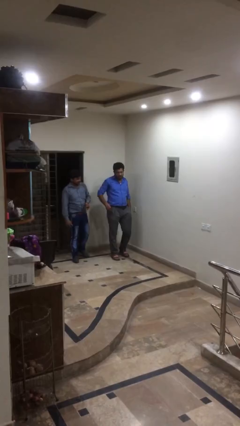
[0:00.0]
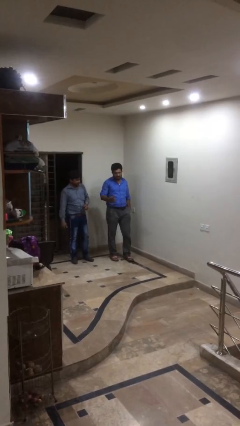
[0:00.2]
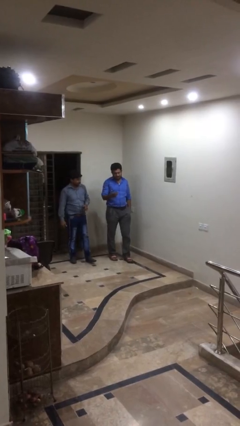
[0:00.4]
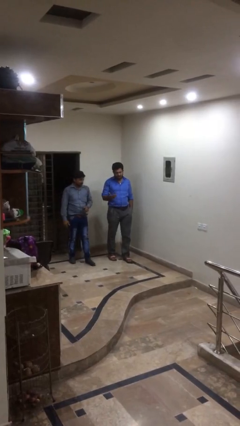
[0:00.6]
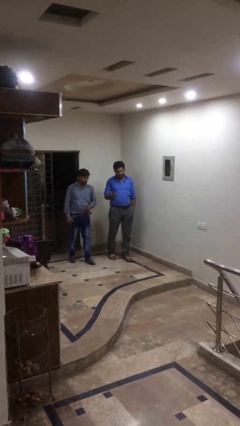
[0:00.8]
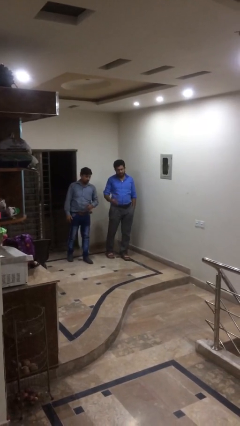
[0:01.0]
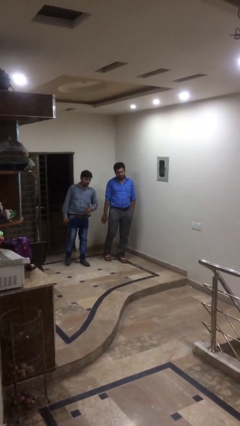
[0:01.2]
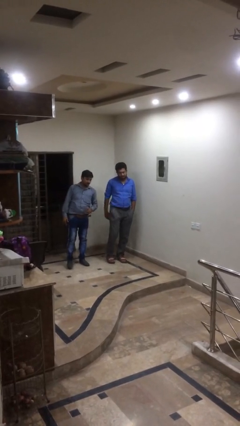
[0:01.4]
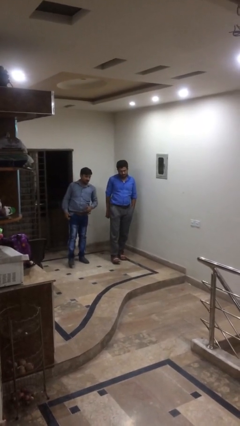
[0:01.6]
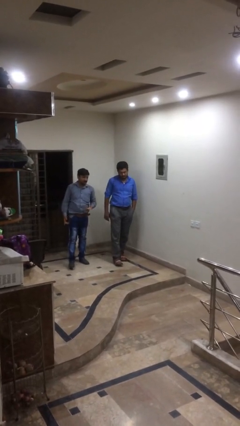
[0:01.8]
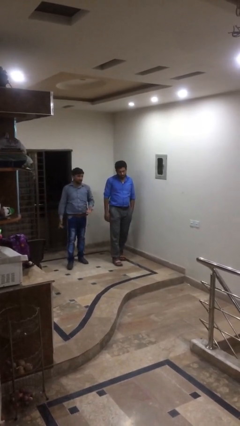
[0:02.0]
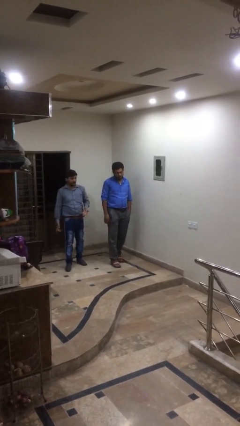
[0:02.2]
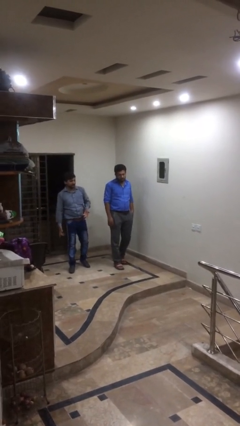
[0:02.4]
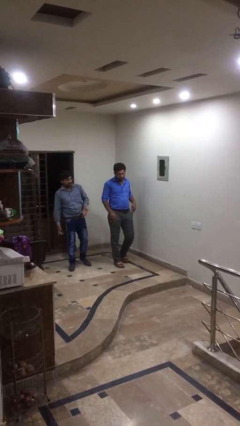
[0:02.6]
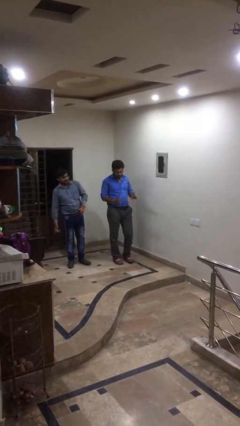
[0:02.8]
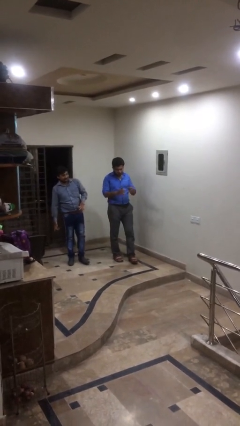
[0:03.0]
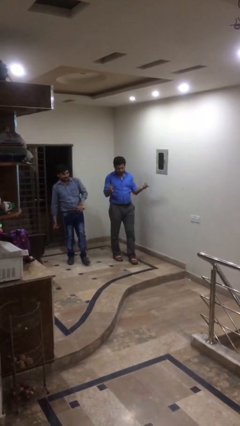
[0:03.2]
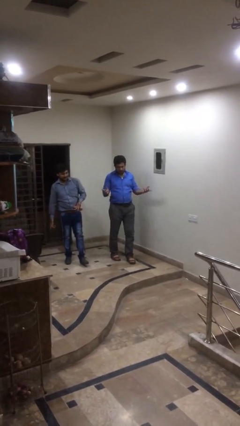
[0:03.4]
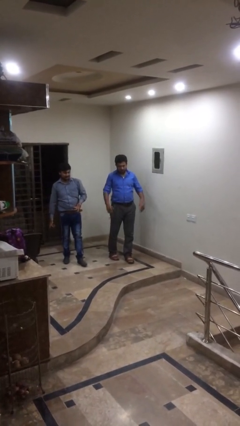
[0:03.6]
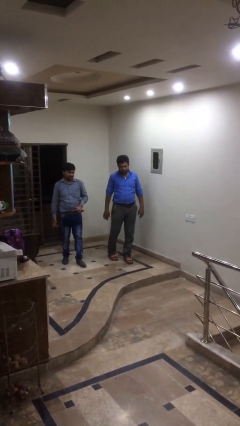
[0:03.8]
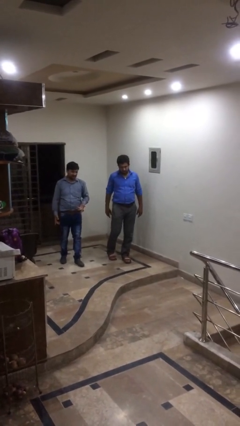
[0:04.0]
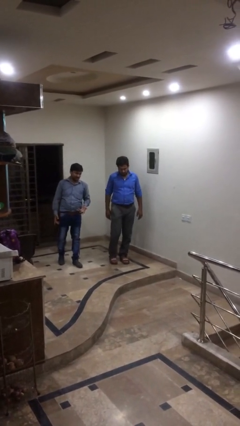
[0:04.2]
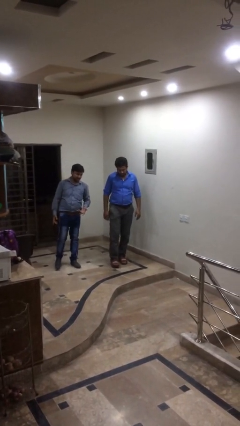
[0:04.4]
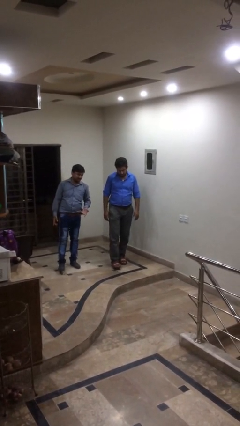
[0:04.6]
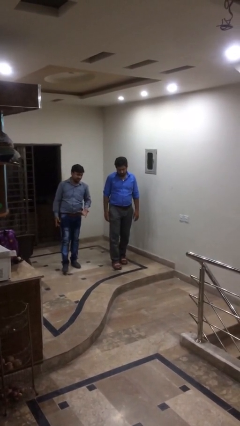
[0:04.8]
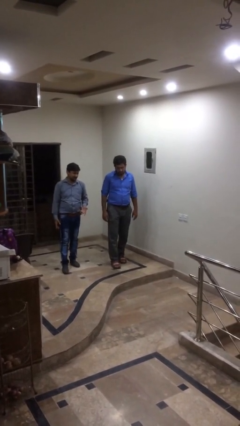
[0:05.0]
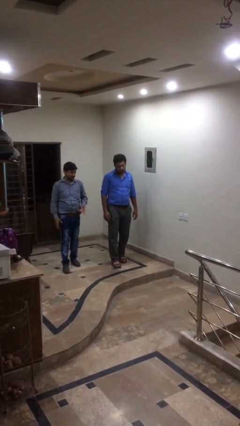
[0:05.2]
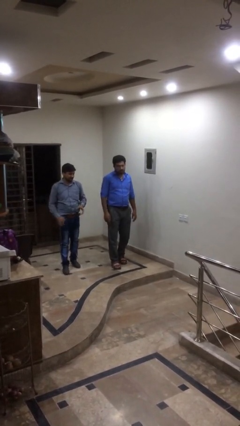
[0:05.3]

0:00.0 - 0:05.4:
person talks to person

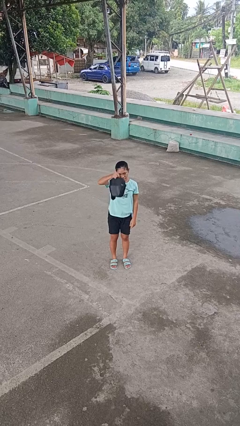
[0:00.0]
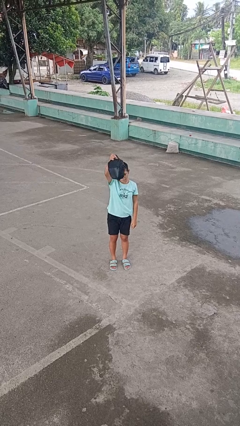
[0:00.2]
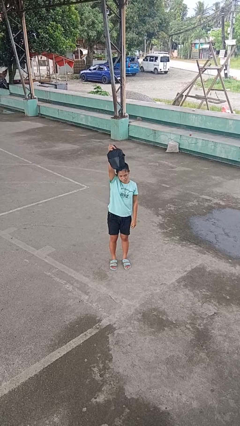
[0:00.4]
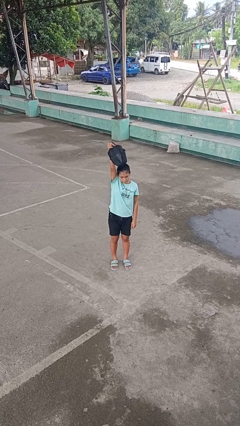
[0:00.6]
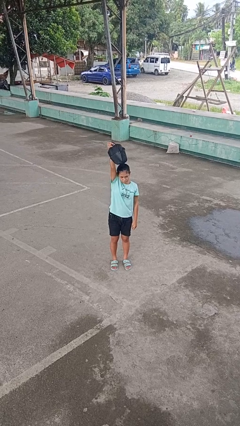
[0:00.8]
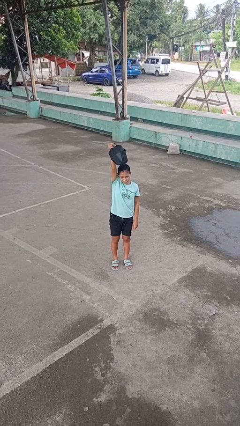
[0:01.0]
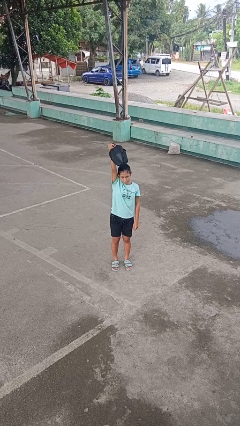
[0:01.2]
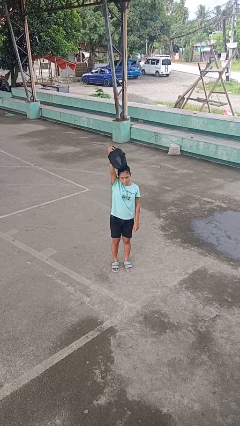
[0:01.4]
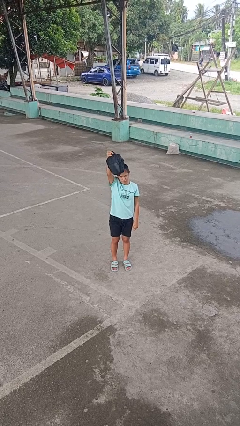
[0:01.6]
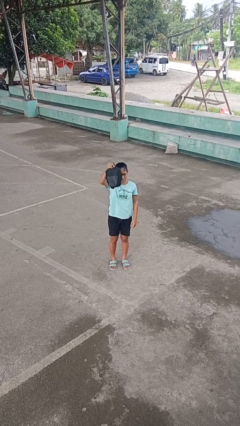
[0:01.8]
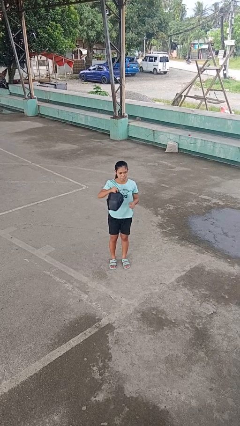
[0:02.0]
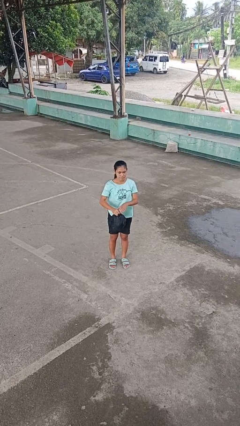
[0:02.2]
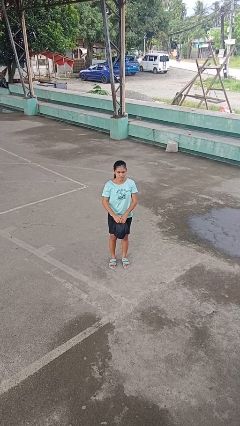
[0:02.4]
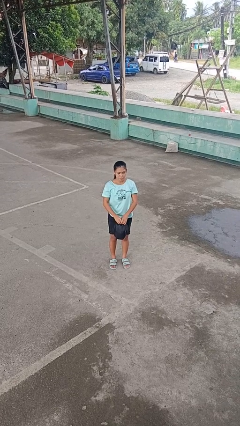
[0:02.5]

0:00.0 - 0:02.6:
person holds object above head

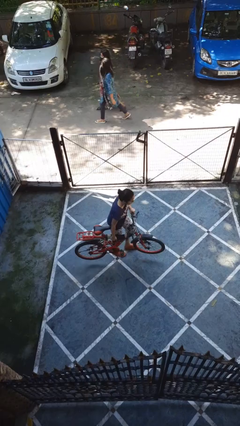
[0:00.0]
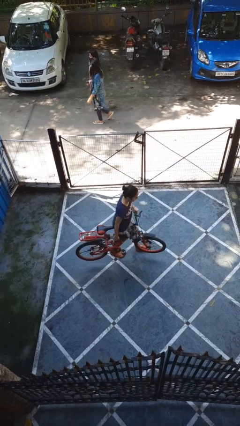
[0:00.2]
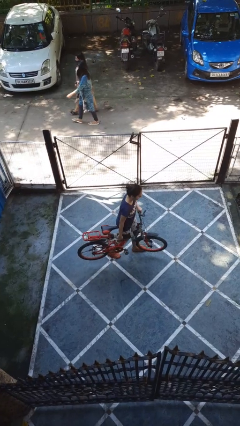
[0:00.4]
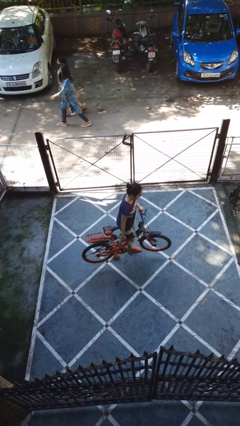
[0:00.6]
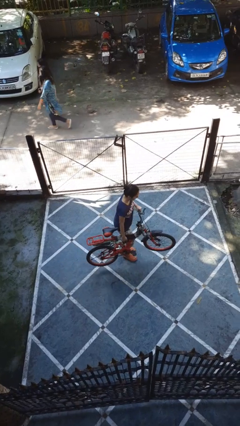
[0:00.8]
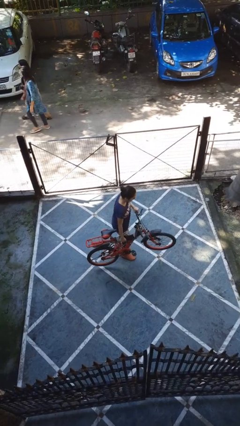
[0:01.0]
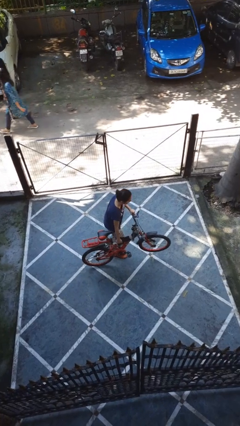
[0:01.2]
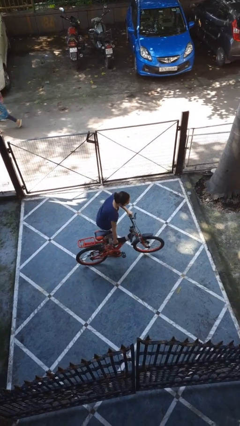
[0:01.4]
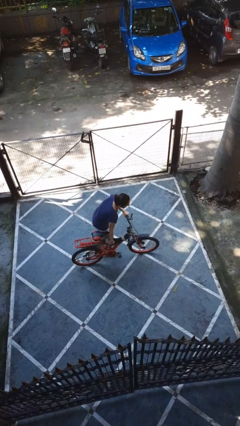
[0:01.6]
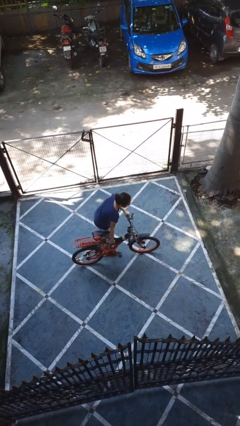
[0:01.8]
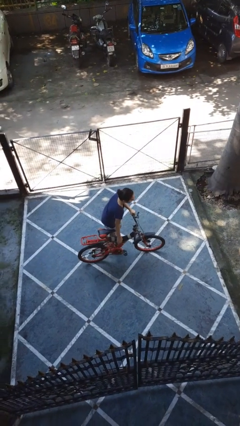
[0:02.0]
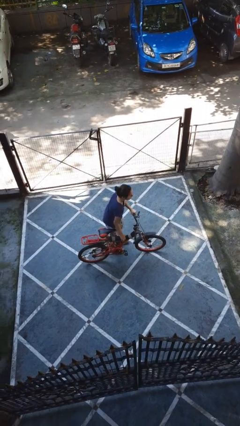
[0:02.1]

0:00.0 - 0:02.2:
person carries bicycle

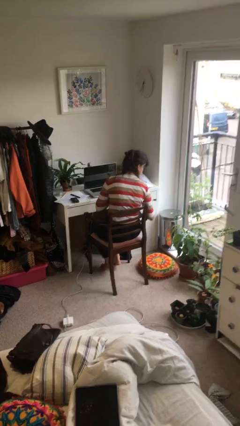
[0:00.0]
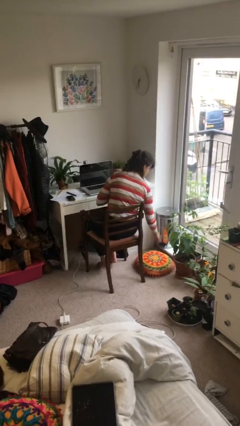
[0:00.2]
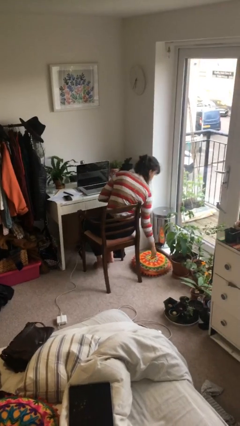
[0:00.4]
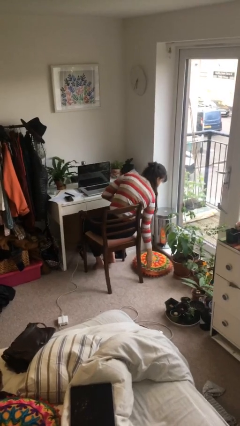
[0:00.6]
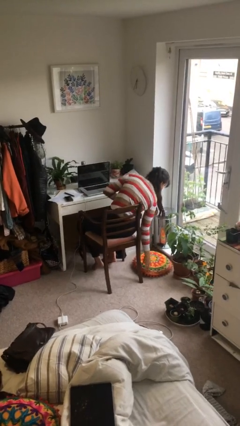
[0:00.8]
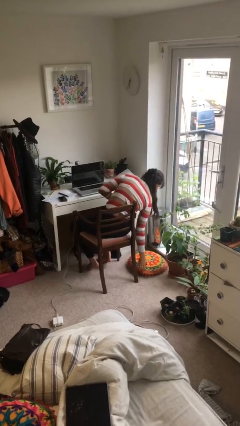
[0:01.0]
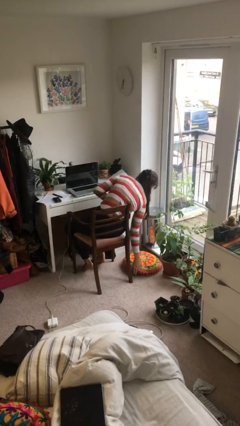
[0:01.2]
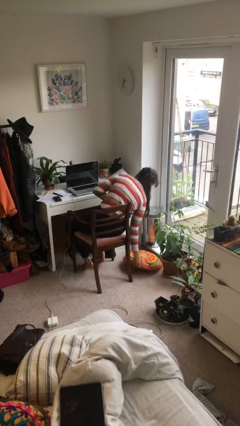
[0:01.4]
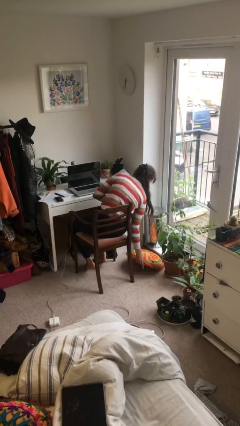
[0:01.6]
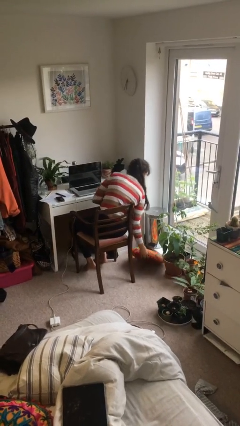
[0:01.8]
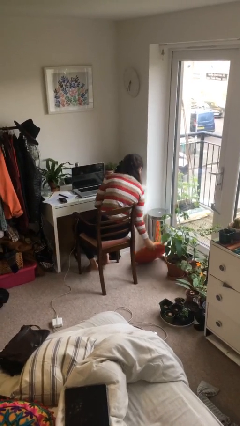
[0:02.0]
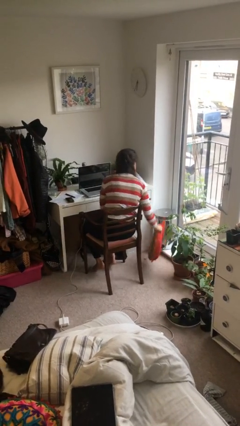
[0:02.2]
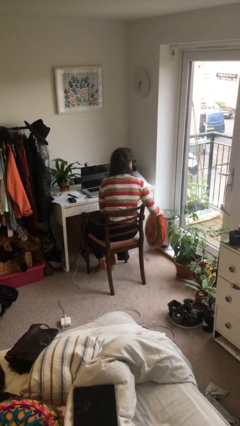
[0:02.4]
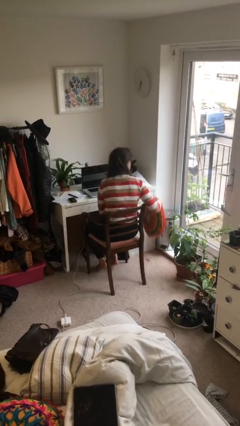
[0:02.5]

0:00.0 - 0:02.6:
person picks up object from floor

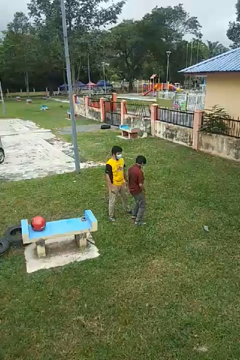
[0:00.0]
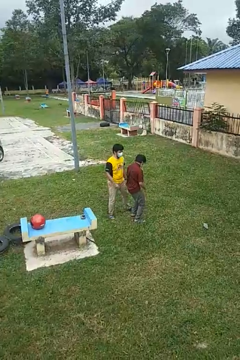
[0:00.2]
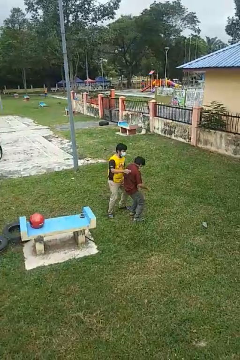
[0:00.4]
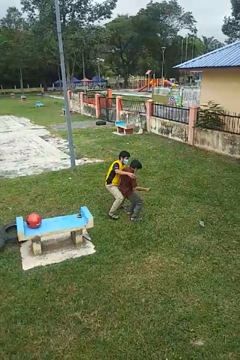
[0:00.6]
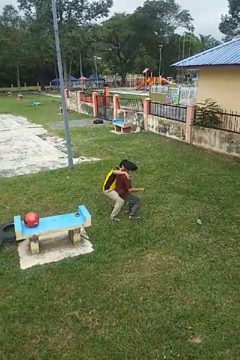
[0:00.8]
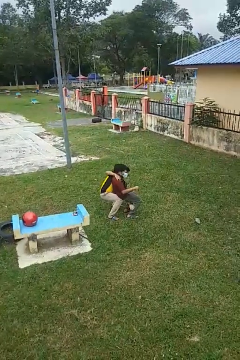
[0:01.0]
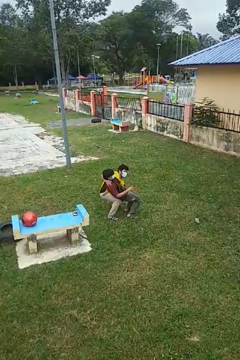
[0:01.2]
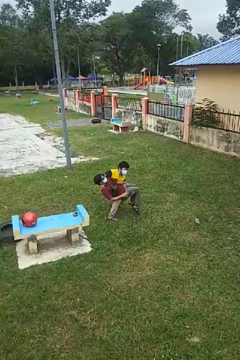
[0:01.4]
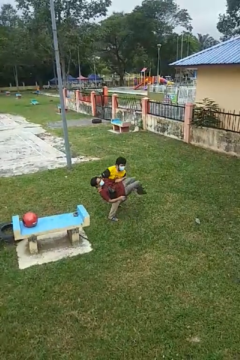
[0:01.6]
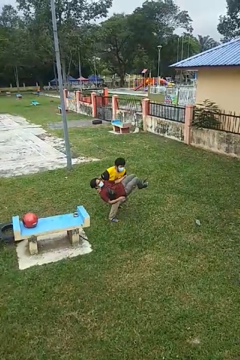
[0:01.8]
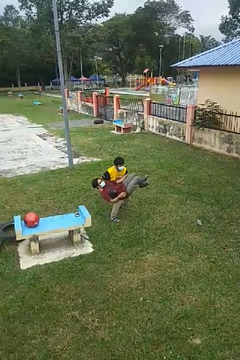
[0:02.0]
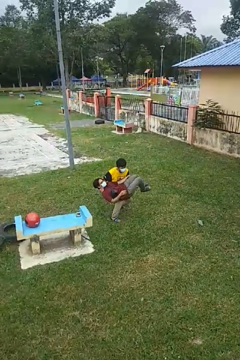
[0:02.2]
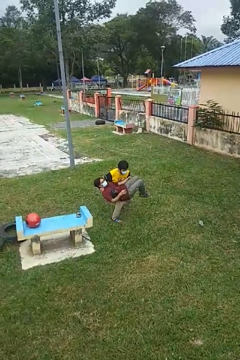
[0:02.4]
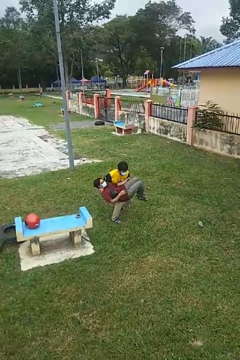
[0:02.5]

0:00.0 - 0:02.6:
person picks up person

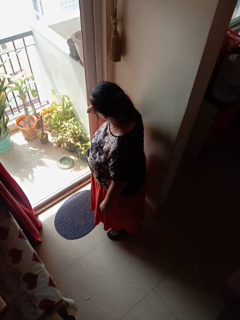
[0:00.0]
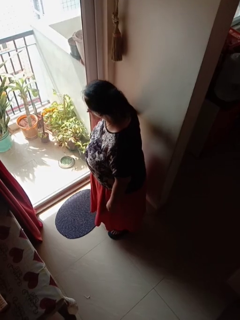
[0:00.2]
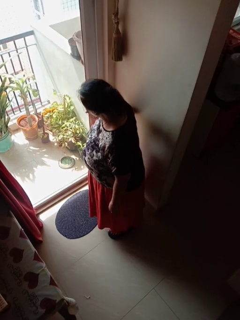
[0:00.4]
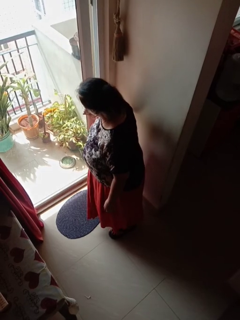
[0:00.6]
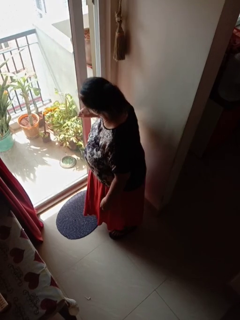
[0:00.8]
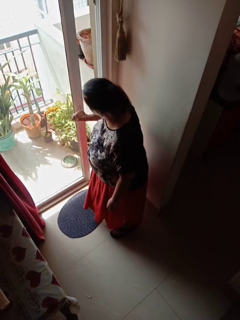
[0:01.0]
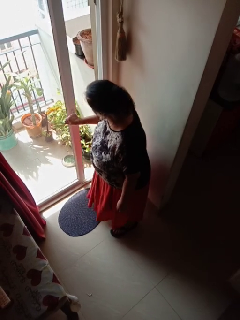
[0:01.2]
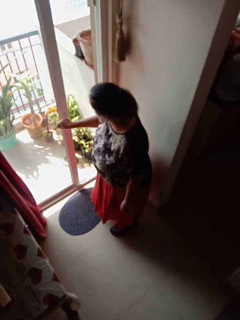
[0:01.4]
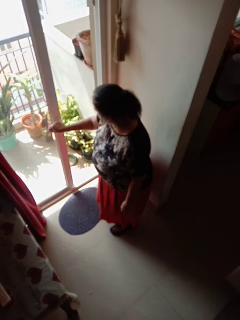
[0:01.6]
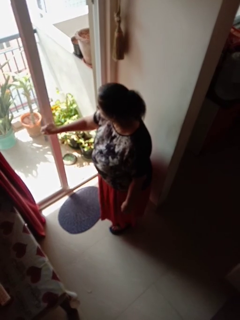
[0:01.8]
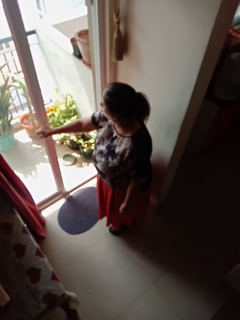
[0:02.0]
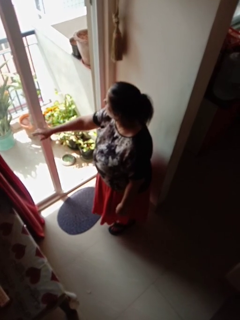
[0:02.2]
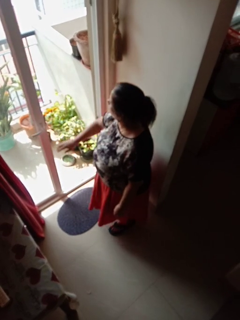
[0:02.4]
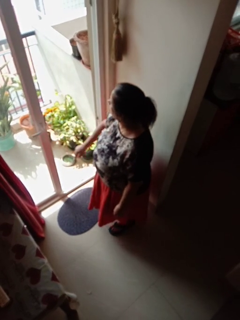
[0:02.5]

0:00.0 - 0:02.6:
person opens sliding door

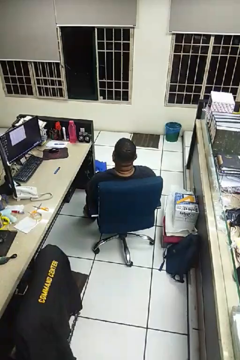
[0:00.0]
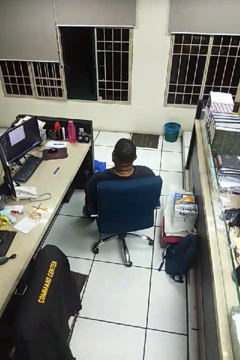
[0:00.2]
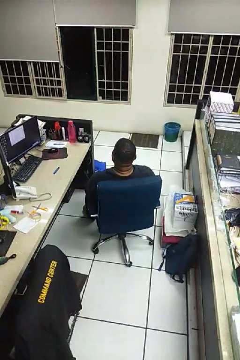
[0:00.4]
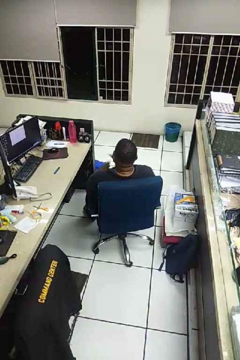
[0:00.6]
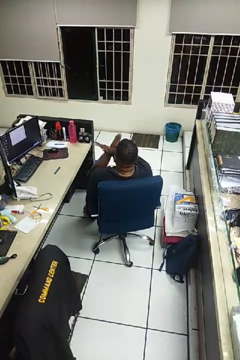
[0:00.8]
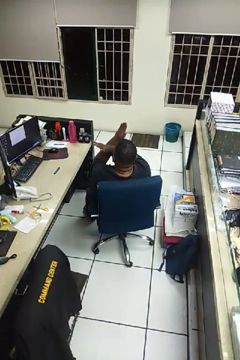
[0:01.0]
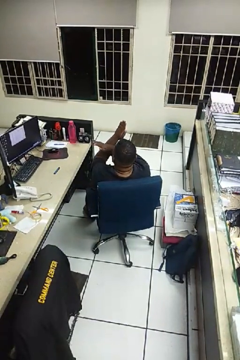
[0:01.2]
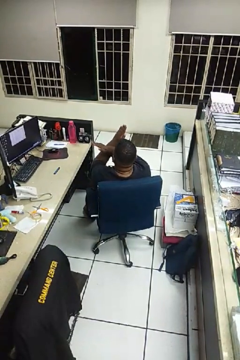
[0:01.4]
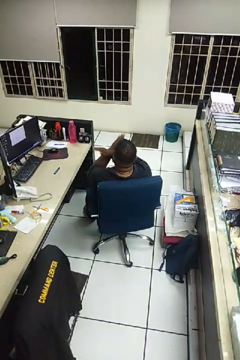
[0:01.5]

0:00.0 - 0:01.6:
person gestures arms x
